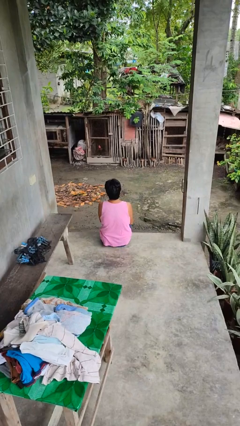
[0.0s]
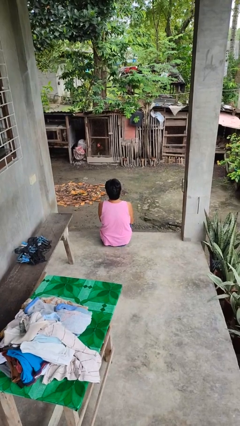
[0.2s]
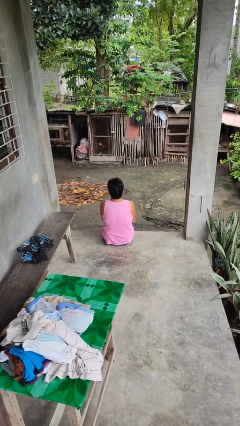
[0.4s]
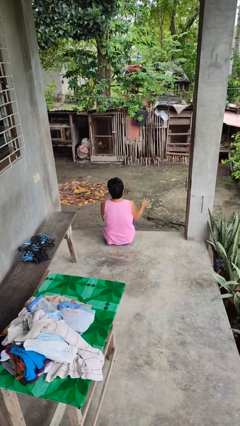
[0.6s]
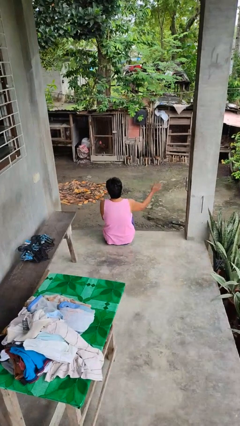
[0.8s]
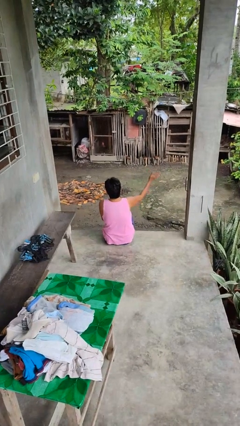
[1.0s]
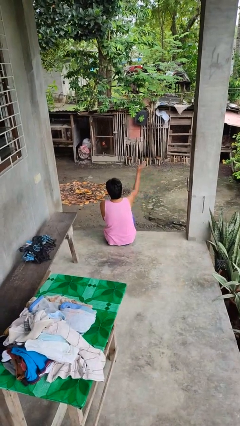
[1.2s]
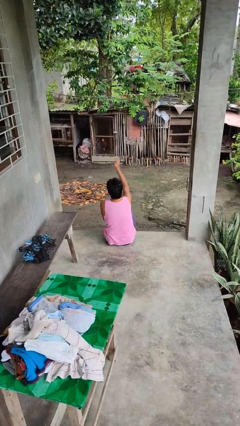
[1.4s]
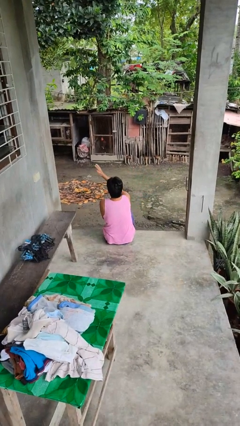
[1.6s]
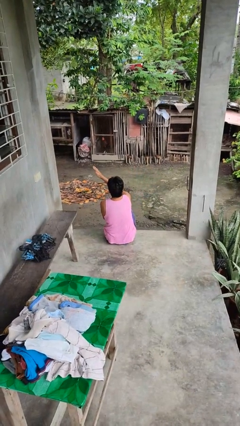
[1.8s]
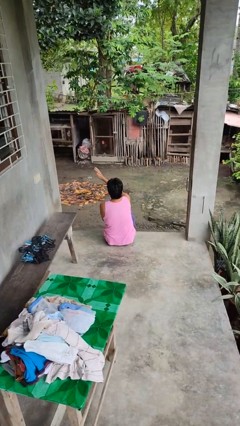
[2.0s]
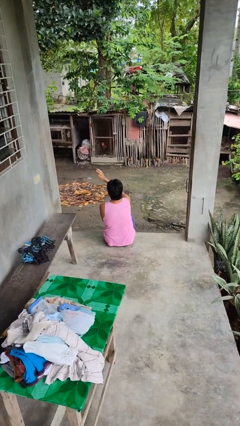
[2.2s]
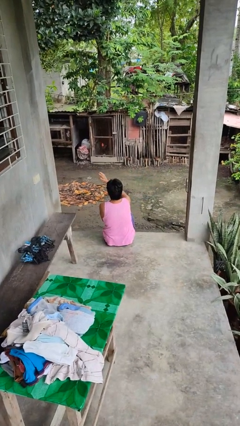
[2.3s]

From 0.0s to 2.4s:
person gestures swipe left

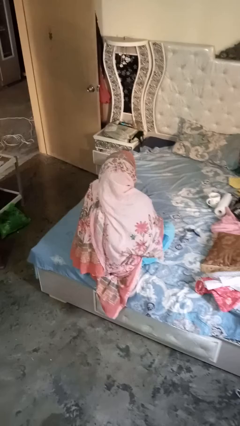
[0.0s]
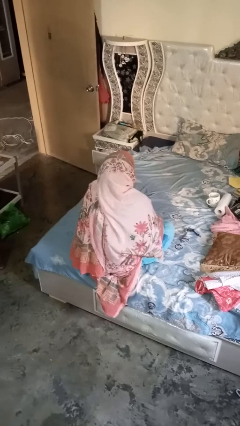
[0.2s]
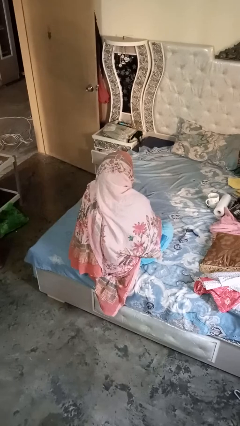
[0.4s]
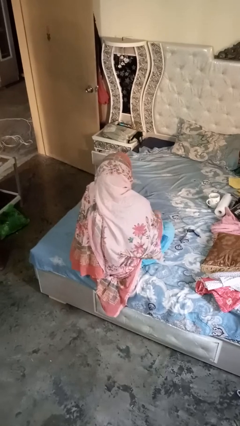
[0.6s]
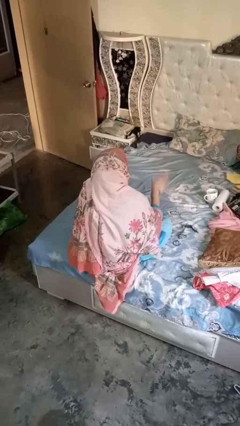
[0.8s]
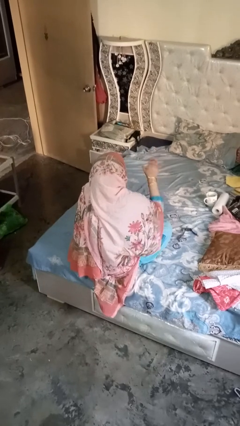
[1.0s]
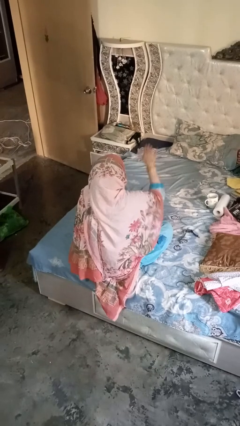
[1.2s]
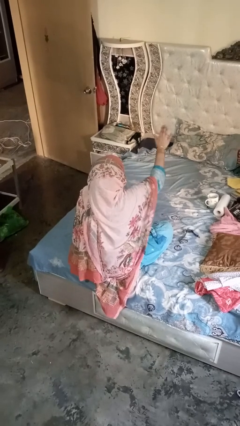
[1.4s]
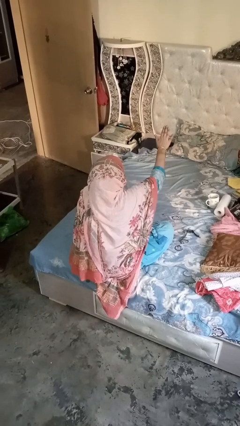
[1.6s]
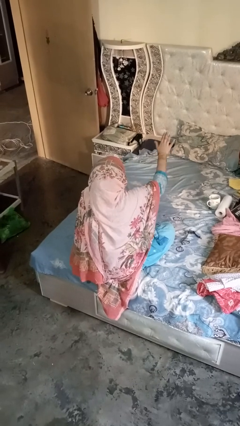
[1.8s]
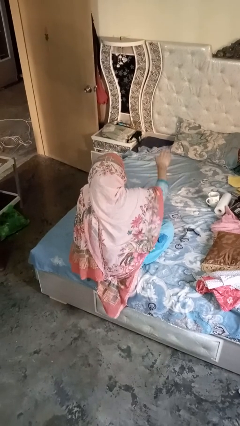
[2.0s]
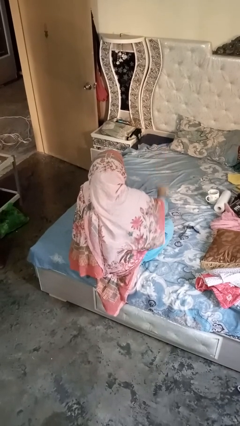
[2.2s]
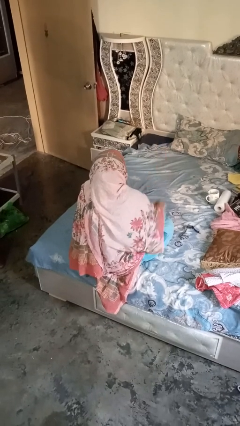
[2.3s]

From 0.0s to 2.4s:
person gestures stop

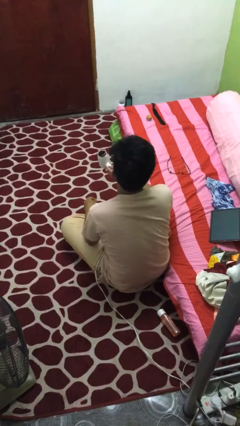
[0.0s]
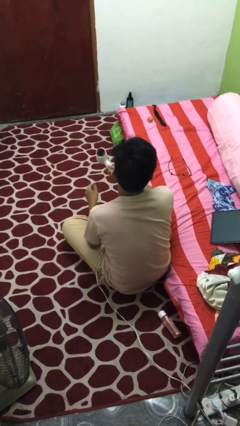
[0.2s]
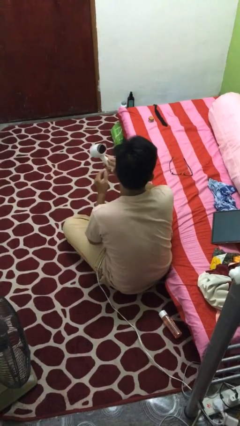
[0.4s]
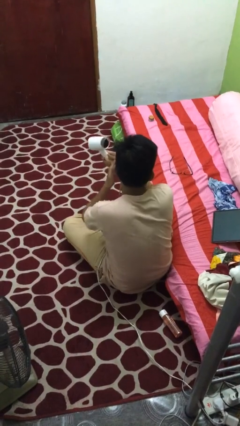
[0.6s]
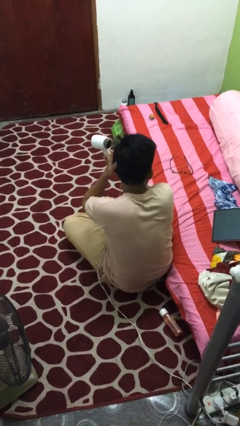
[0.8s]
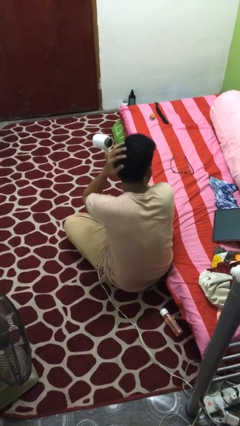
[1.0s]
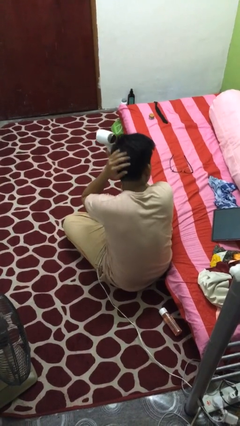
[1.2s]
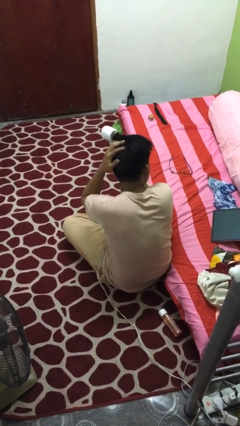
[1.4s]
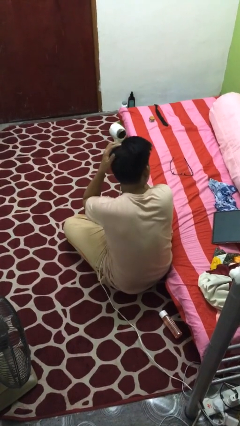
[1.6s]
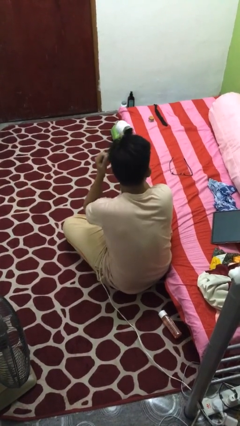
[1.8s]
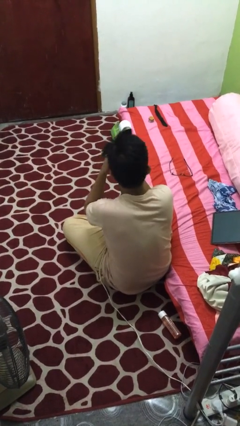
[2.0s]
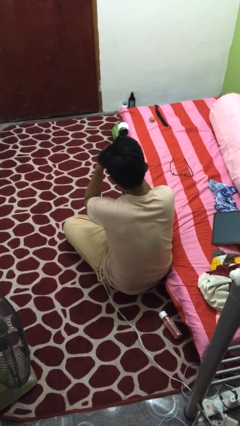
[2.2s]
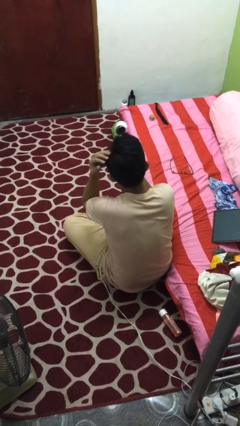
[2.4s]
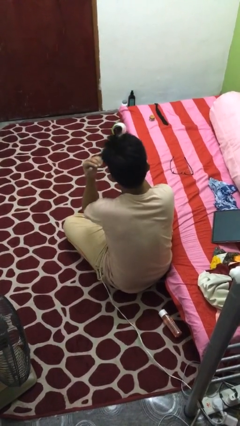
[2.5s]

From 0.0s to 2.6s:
person dries hair with hairdryer

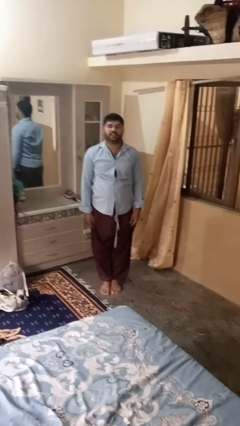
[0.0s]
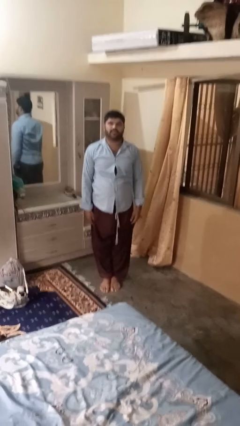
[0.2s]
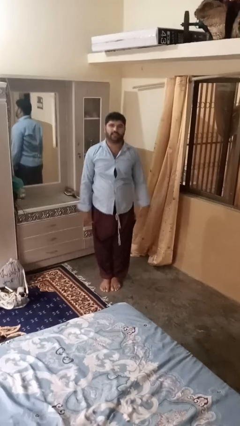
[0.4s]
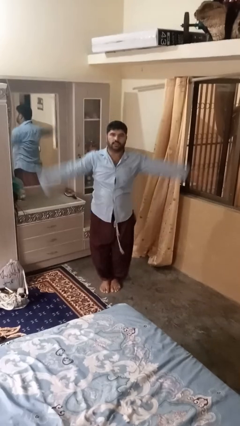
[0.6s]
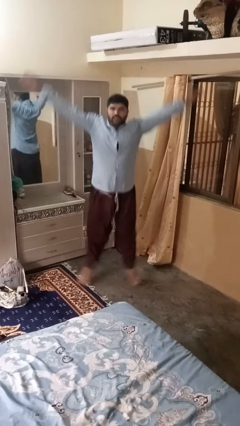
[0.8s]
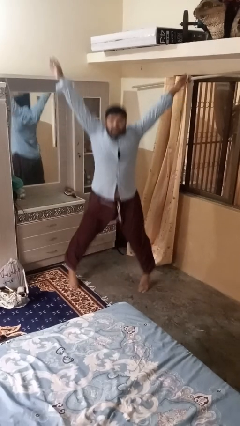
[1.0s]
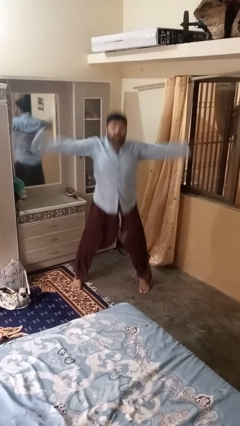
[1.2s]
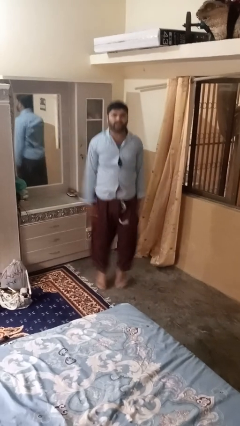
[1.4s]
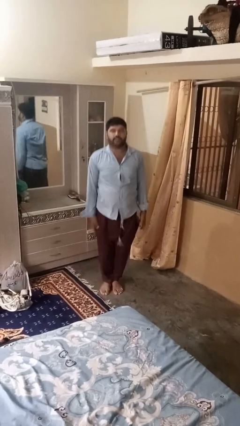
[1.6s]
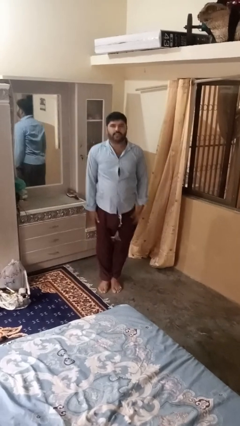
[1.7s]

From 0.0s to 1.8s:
person exercises with jumping jacks

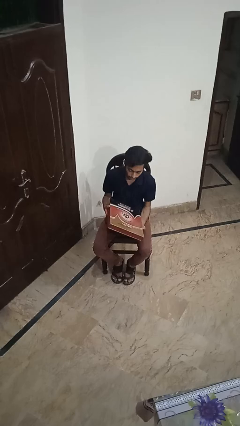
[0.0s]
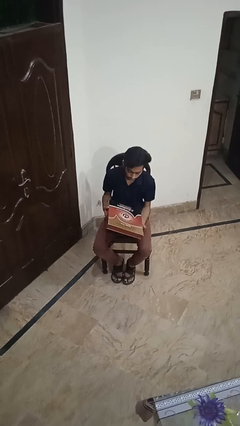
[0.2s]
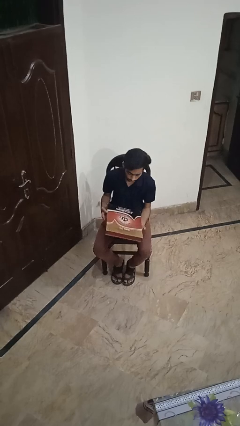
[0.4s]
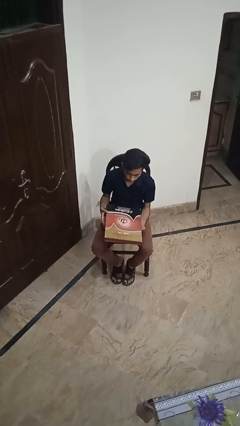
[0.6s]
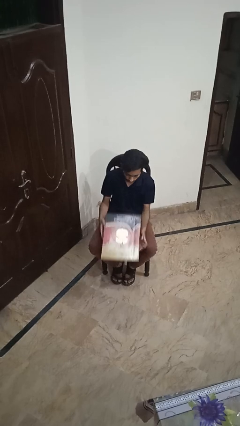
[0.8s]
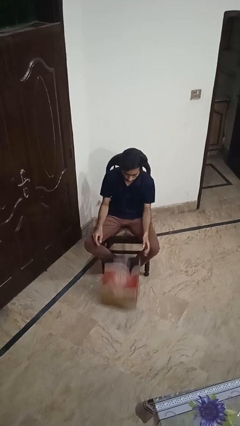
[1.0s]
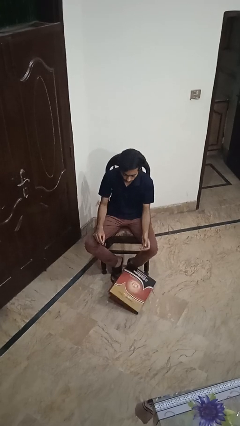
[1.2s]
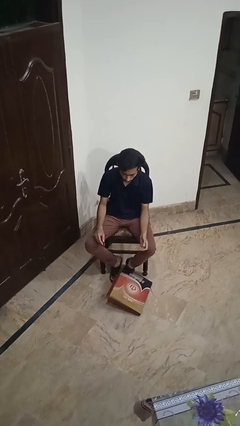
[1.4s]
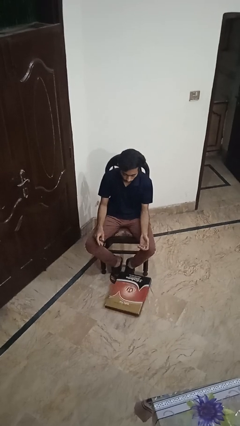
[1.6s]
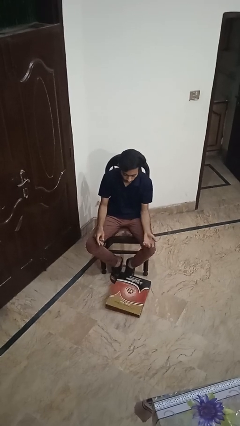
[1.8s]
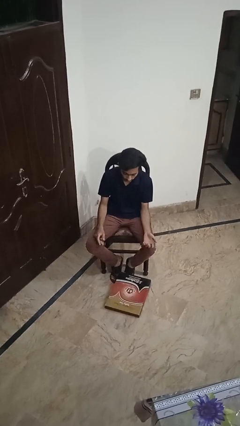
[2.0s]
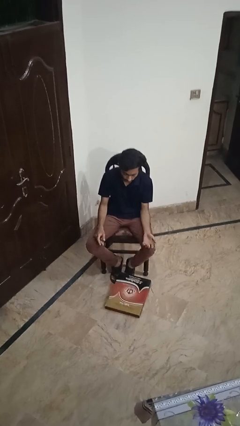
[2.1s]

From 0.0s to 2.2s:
person drops object

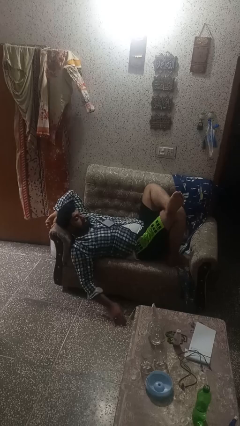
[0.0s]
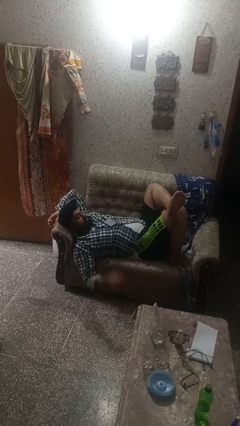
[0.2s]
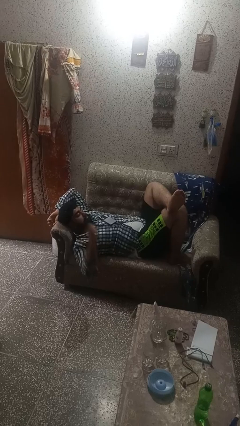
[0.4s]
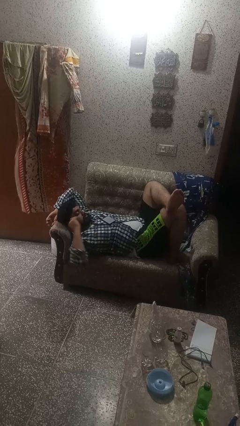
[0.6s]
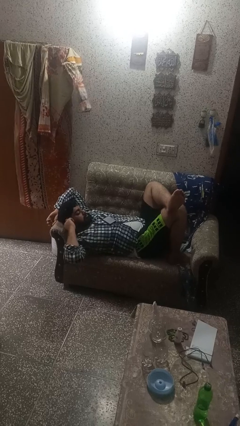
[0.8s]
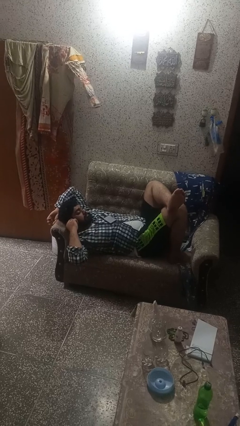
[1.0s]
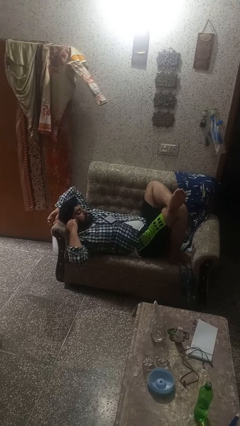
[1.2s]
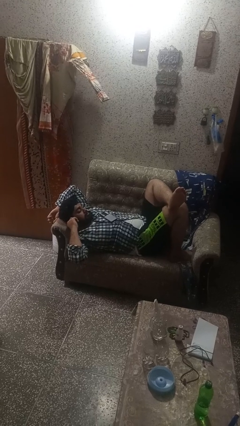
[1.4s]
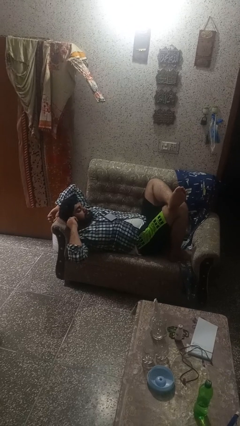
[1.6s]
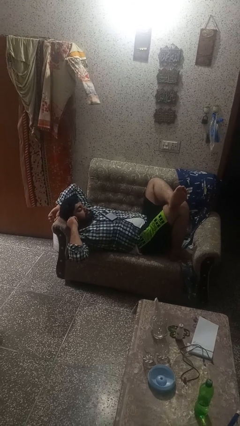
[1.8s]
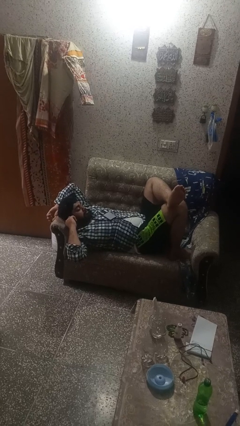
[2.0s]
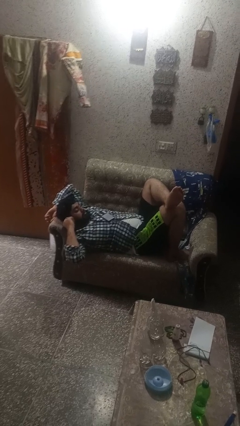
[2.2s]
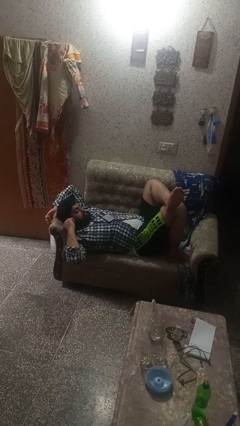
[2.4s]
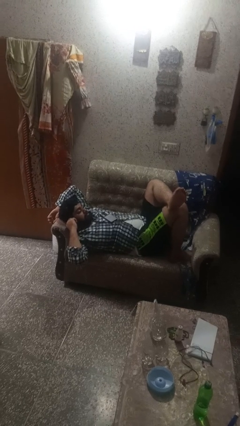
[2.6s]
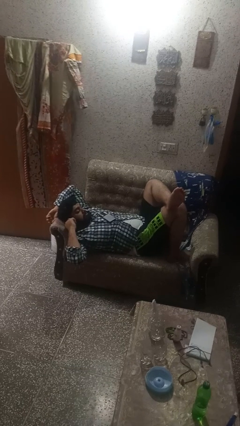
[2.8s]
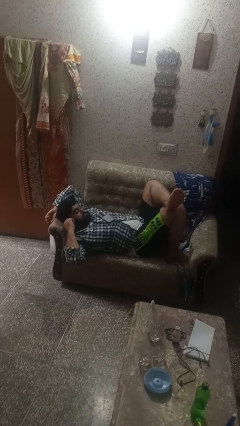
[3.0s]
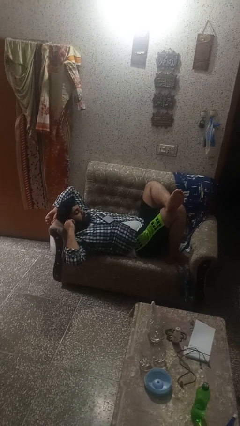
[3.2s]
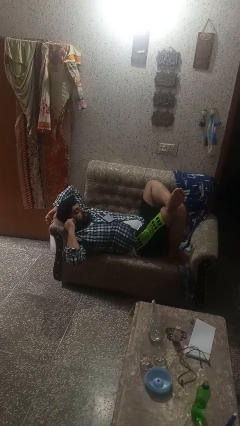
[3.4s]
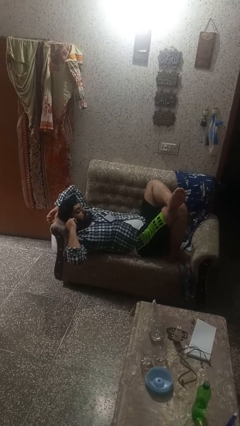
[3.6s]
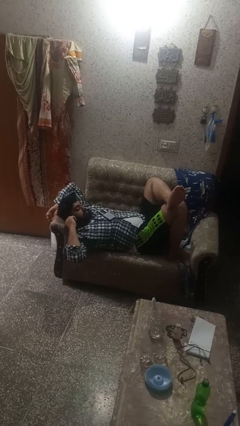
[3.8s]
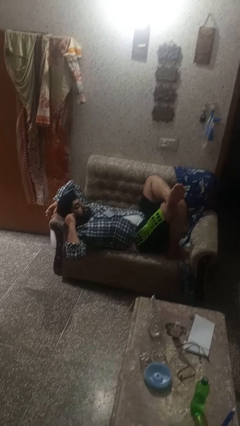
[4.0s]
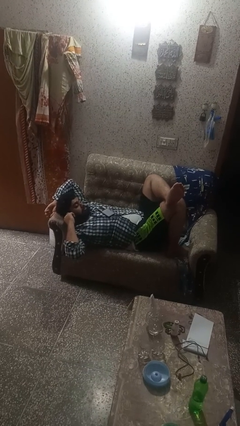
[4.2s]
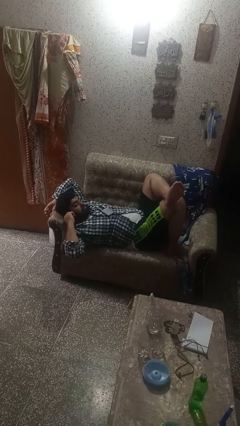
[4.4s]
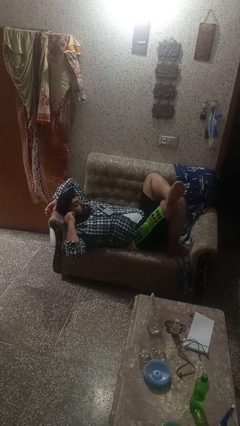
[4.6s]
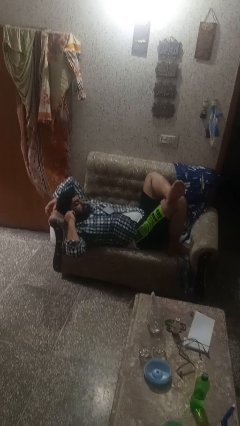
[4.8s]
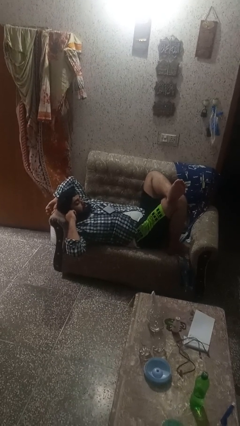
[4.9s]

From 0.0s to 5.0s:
person touches earlobe

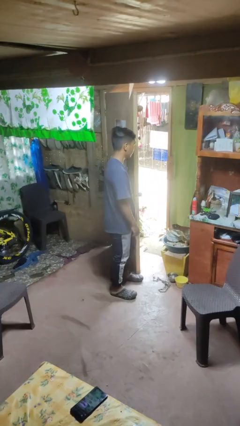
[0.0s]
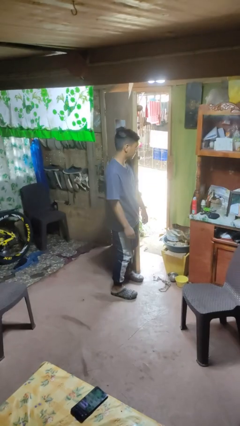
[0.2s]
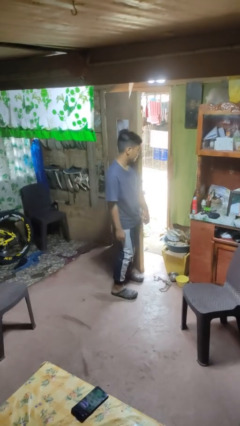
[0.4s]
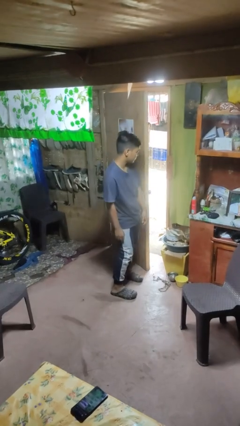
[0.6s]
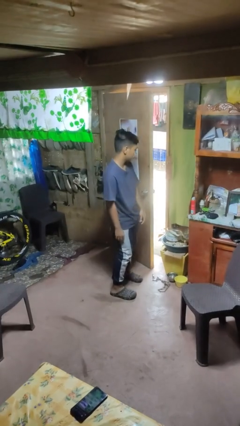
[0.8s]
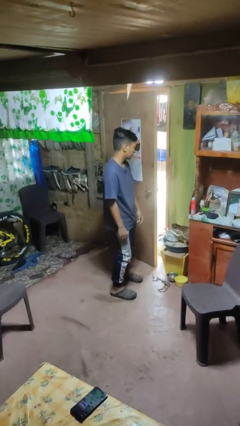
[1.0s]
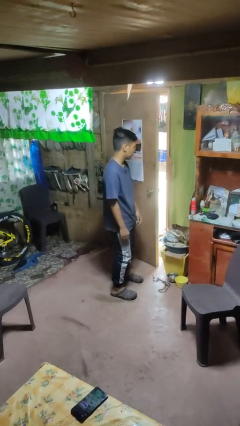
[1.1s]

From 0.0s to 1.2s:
person closes door with hip
